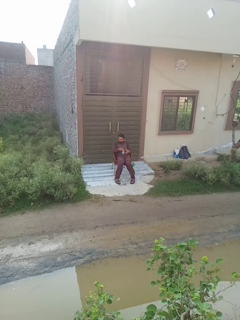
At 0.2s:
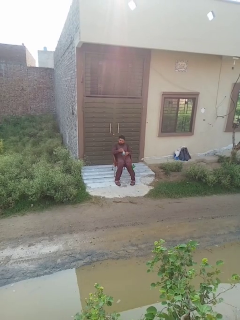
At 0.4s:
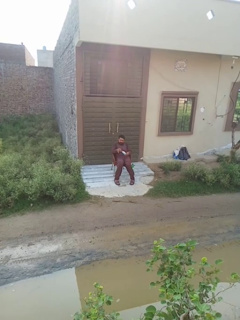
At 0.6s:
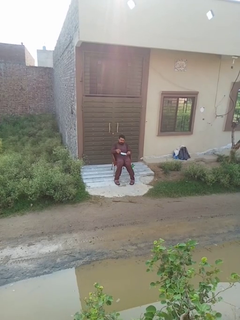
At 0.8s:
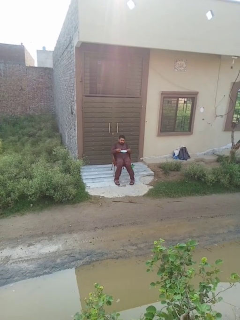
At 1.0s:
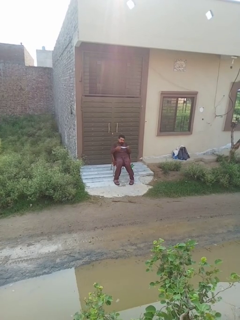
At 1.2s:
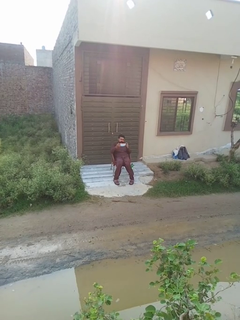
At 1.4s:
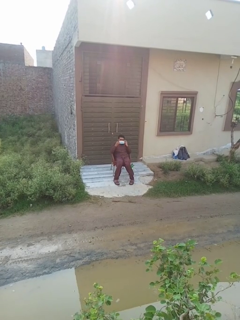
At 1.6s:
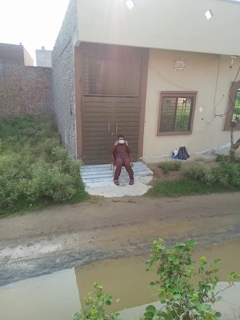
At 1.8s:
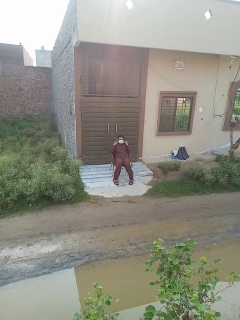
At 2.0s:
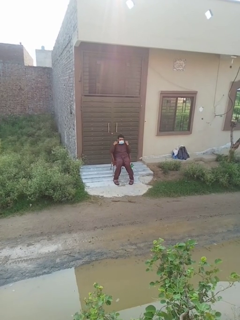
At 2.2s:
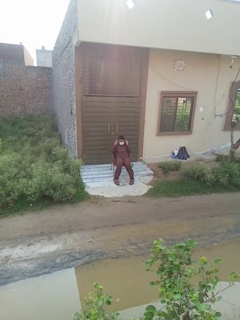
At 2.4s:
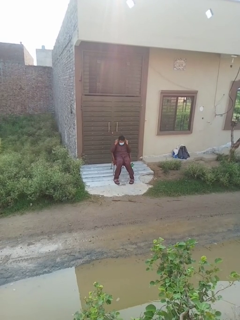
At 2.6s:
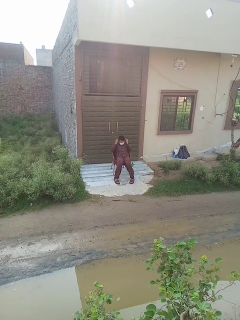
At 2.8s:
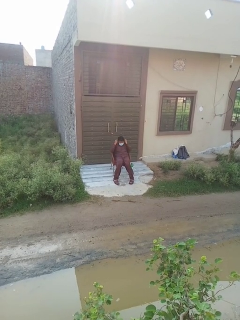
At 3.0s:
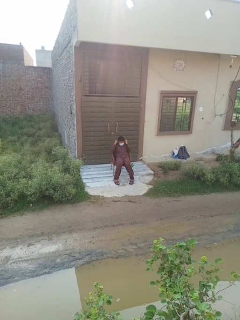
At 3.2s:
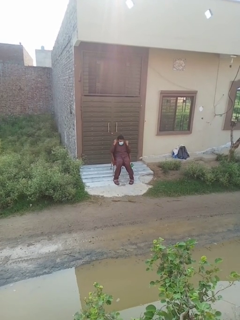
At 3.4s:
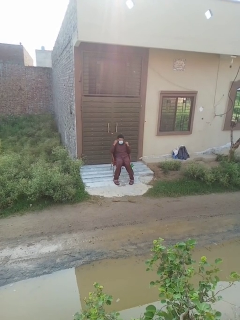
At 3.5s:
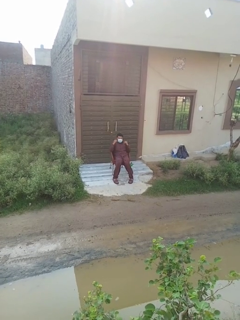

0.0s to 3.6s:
person puts on facemask

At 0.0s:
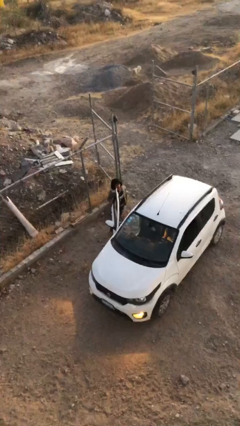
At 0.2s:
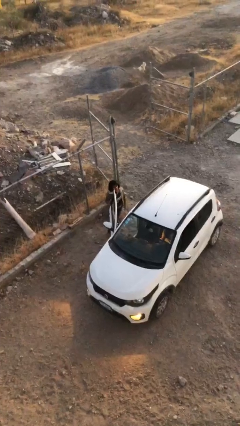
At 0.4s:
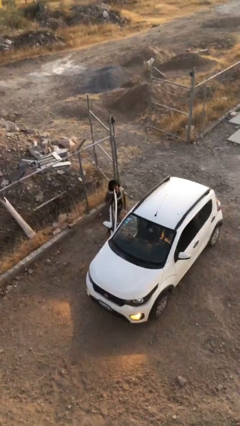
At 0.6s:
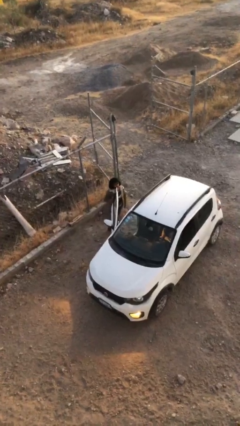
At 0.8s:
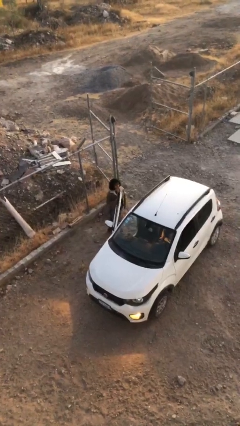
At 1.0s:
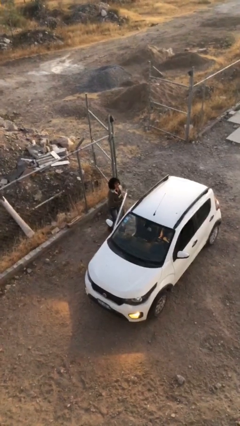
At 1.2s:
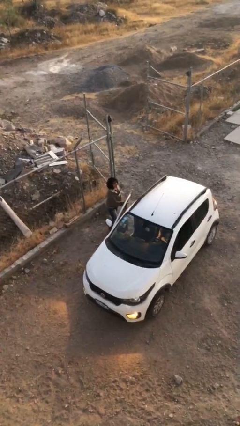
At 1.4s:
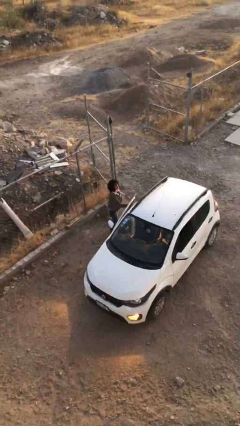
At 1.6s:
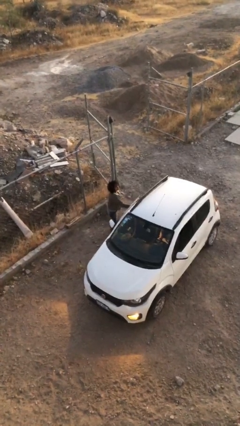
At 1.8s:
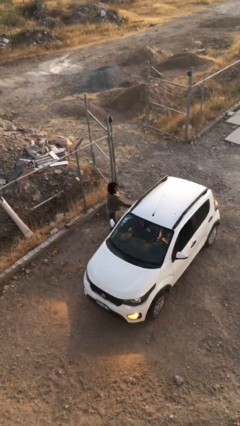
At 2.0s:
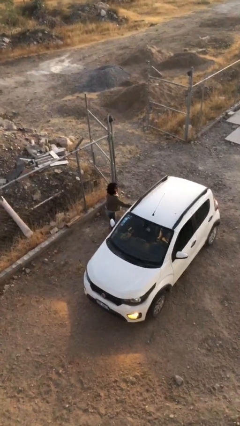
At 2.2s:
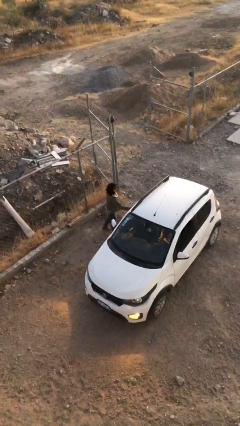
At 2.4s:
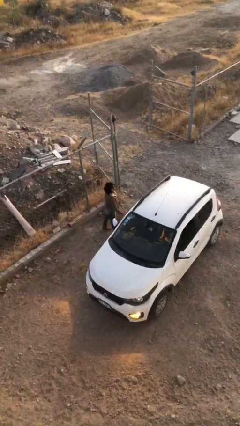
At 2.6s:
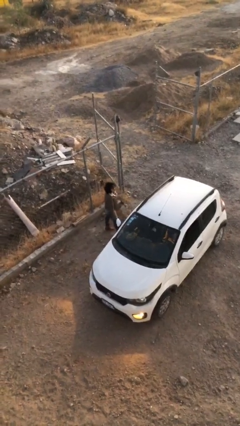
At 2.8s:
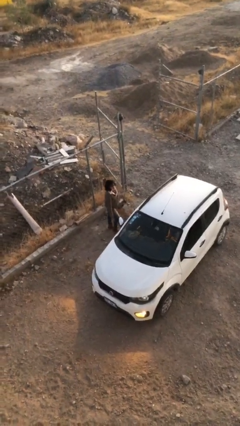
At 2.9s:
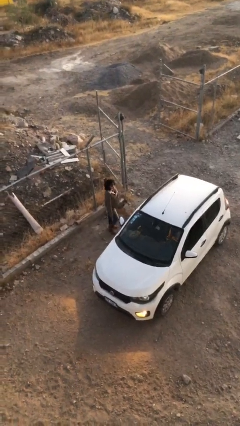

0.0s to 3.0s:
person closes car door

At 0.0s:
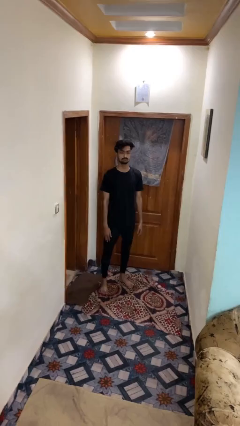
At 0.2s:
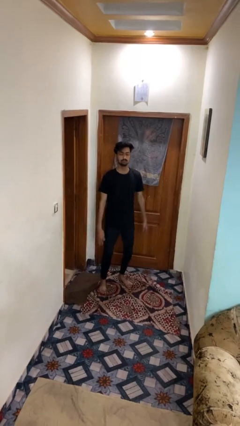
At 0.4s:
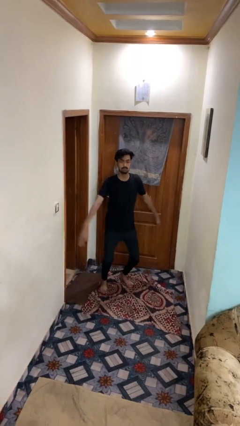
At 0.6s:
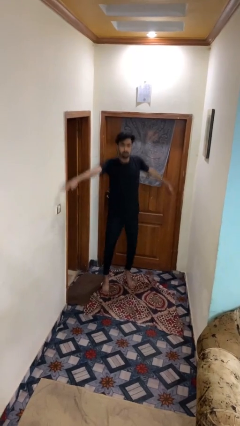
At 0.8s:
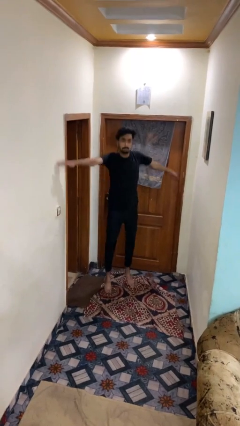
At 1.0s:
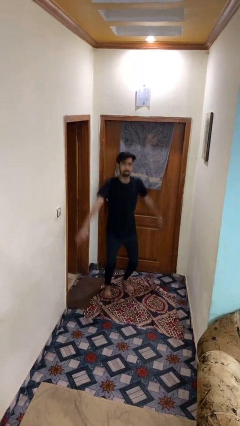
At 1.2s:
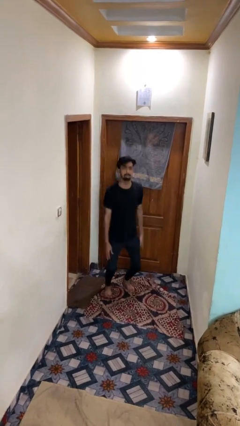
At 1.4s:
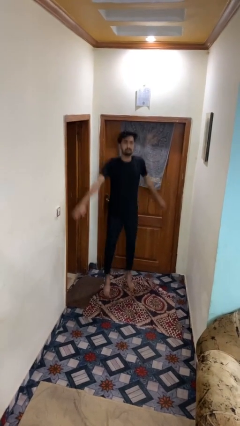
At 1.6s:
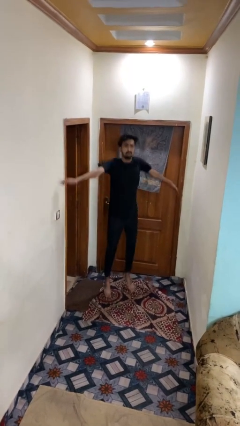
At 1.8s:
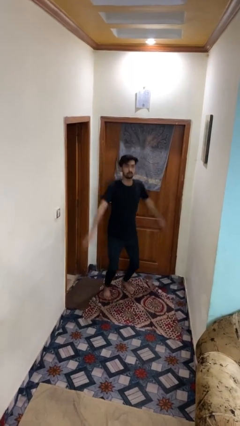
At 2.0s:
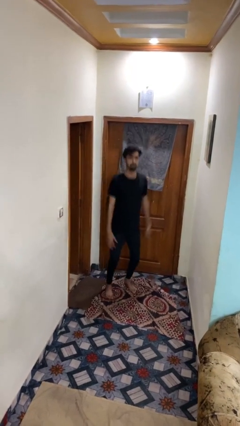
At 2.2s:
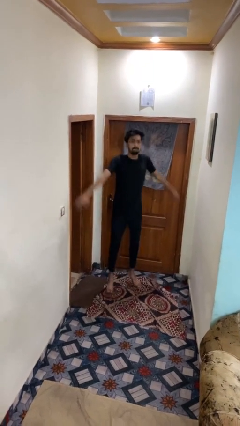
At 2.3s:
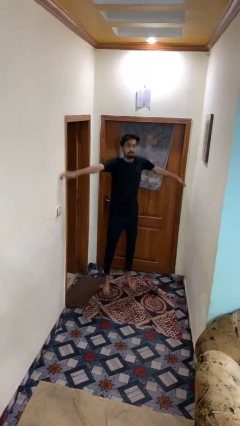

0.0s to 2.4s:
person exercises with jumping jacks

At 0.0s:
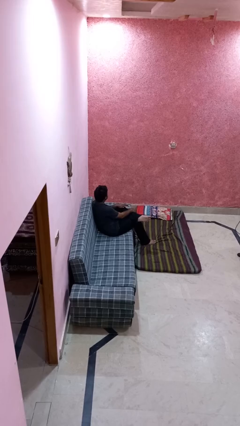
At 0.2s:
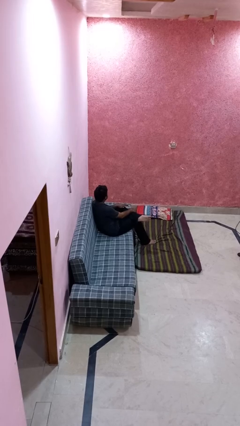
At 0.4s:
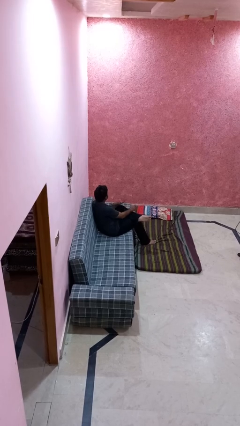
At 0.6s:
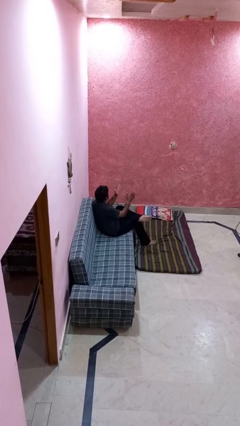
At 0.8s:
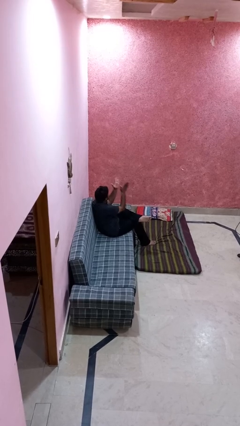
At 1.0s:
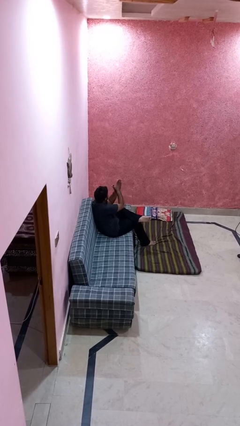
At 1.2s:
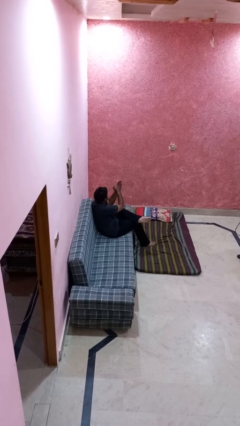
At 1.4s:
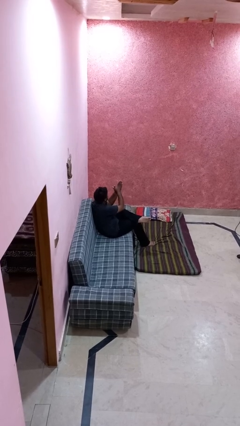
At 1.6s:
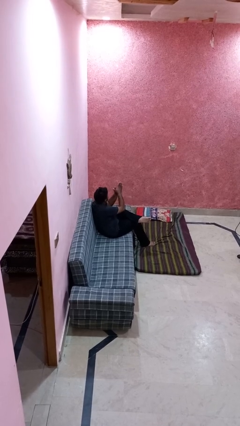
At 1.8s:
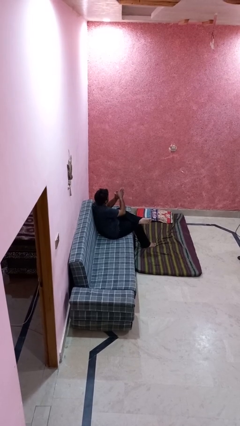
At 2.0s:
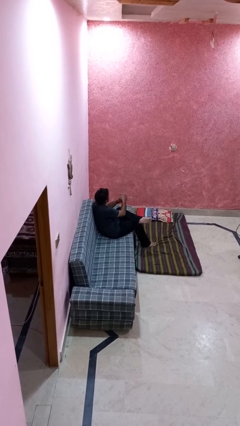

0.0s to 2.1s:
person swats bug

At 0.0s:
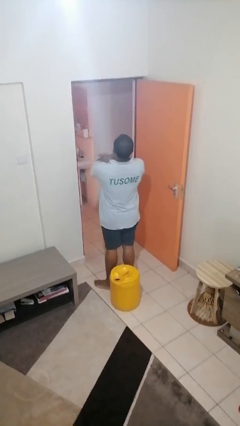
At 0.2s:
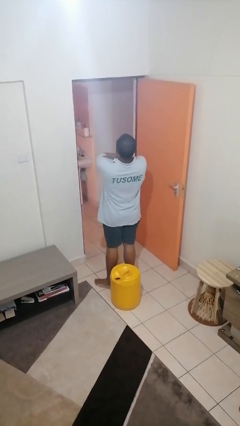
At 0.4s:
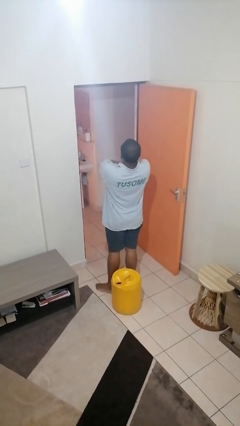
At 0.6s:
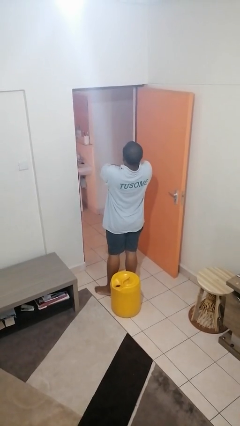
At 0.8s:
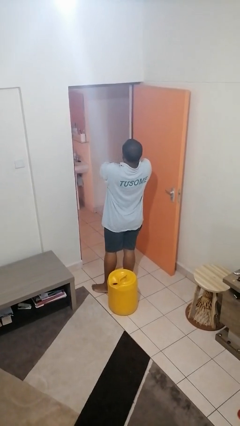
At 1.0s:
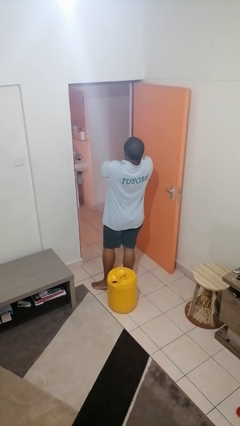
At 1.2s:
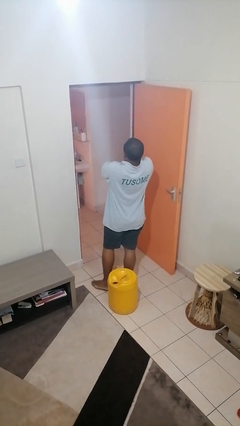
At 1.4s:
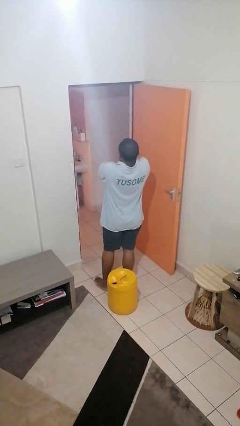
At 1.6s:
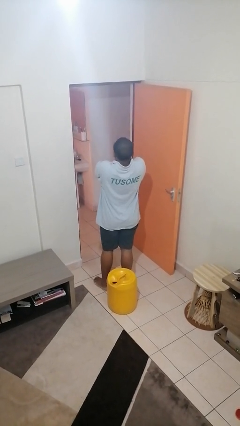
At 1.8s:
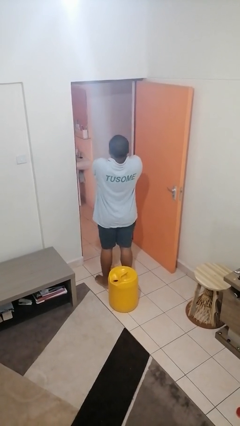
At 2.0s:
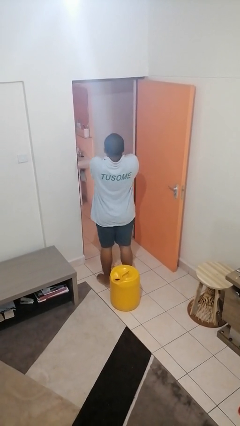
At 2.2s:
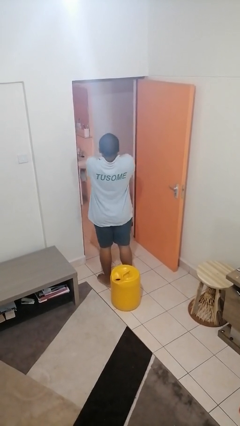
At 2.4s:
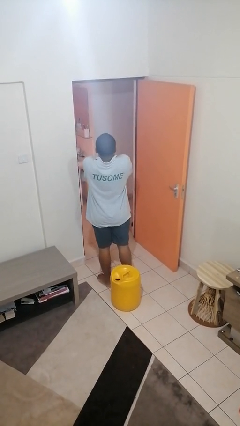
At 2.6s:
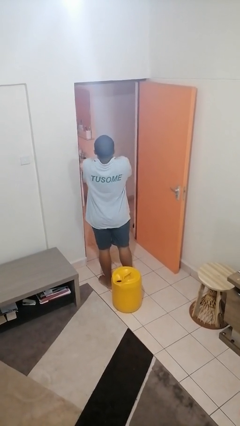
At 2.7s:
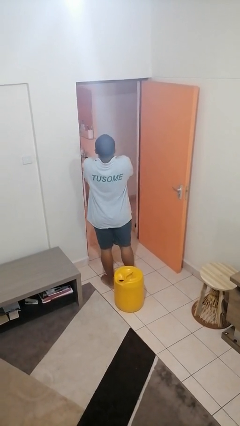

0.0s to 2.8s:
person crosses arms

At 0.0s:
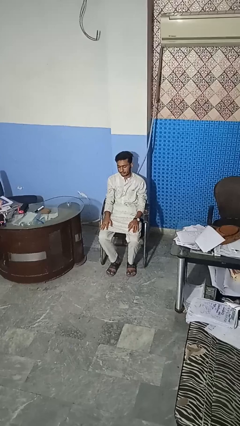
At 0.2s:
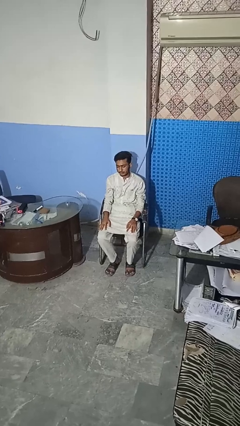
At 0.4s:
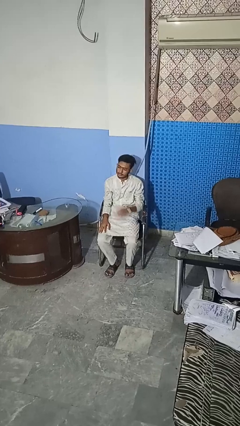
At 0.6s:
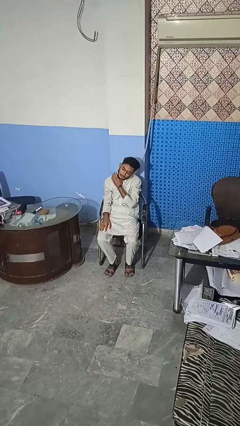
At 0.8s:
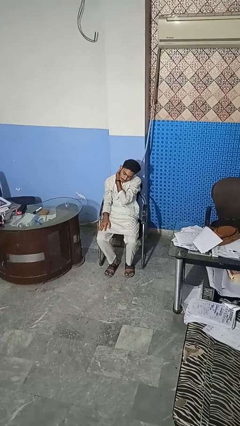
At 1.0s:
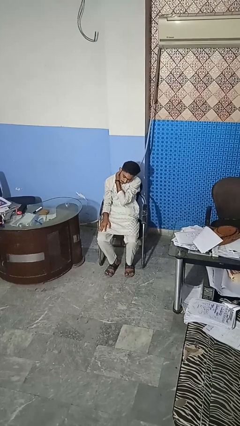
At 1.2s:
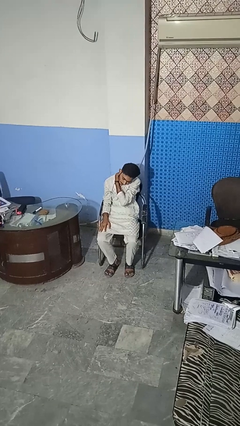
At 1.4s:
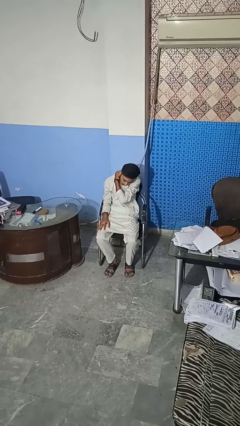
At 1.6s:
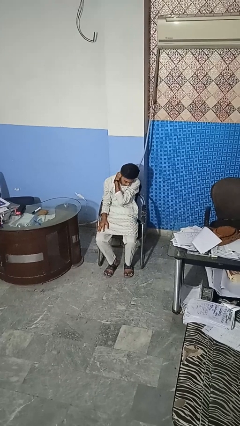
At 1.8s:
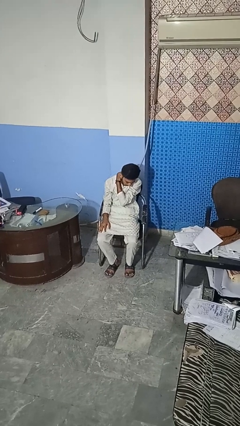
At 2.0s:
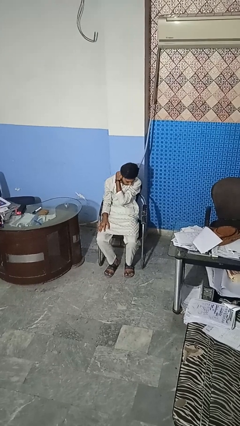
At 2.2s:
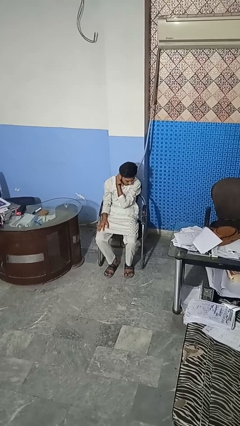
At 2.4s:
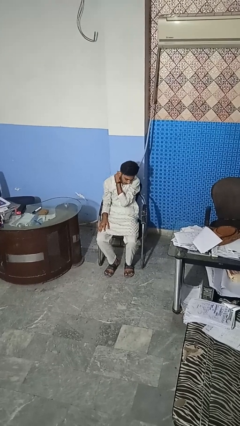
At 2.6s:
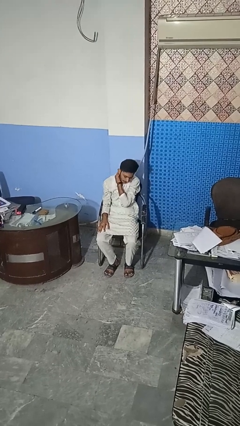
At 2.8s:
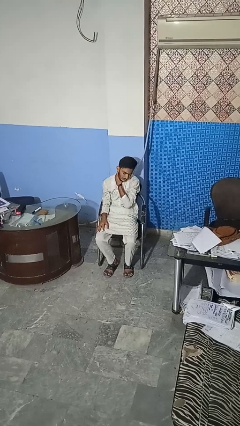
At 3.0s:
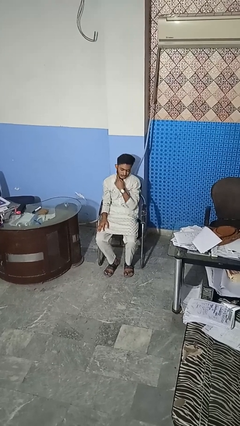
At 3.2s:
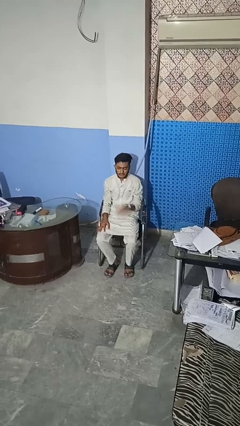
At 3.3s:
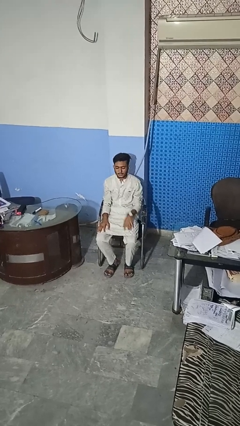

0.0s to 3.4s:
person rubs neck

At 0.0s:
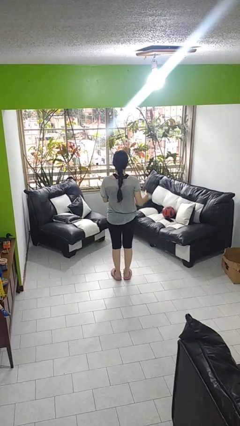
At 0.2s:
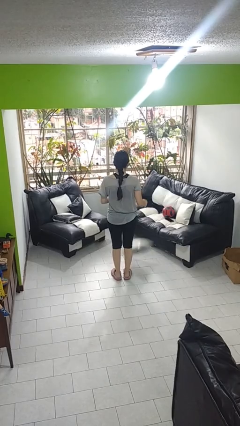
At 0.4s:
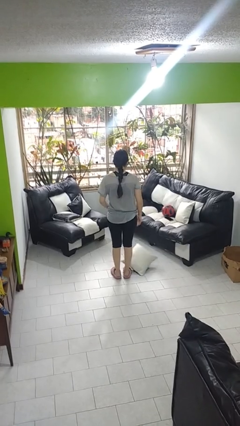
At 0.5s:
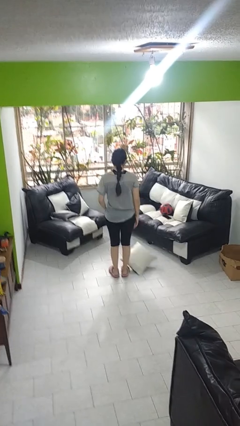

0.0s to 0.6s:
person drops object
